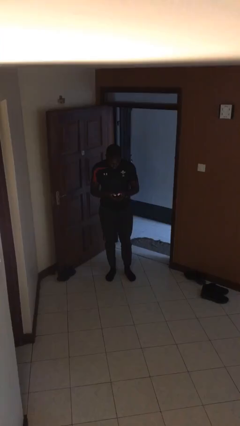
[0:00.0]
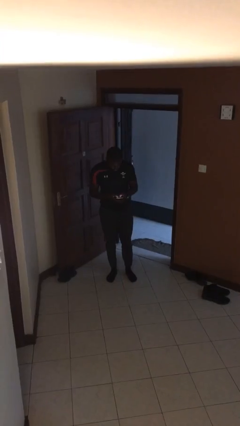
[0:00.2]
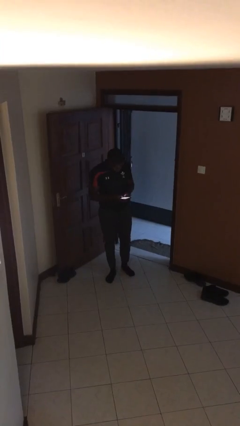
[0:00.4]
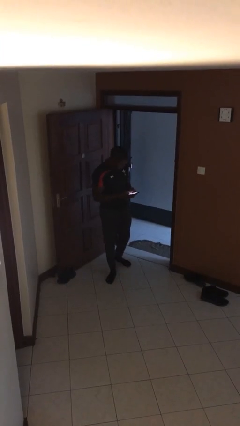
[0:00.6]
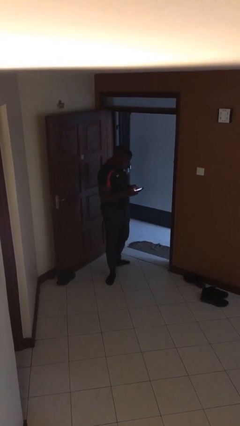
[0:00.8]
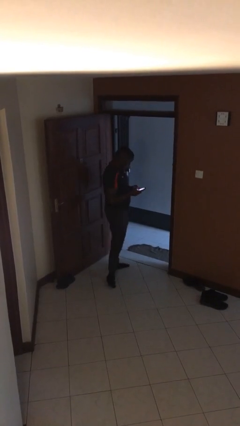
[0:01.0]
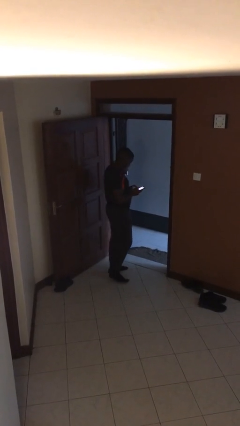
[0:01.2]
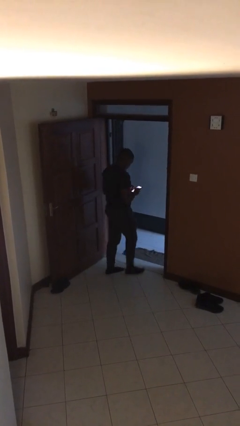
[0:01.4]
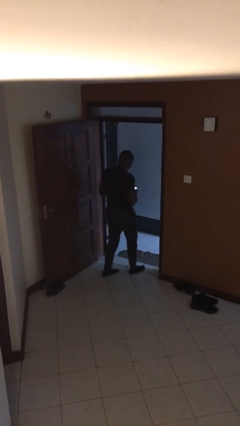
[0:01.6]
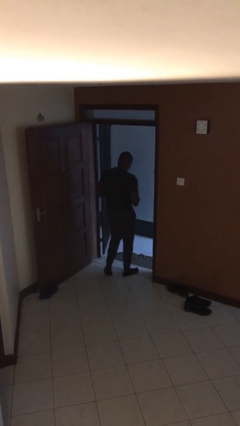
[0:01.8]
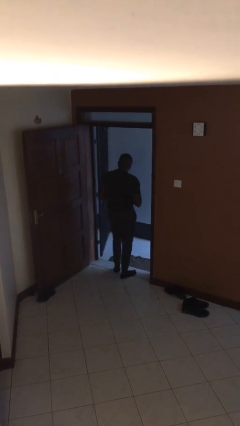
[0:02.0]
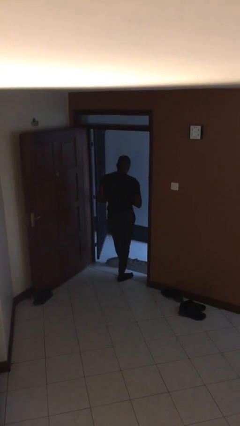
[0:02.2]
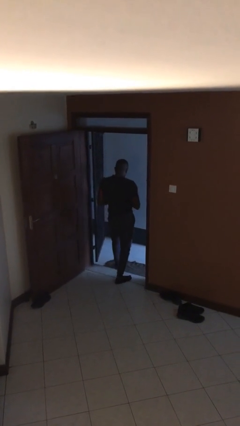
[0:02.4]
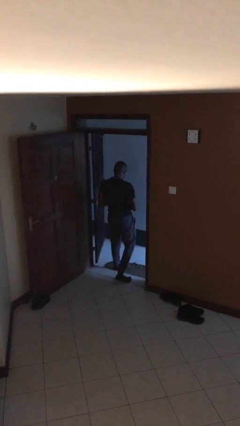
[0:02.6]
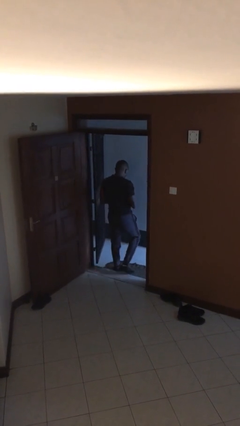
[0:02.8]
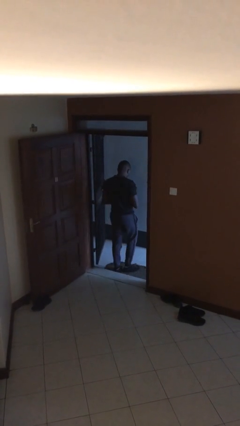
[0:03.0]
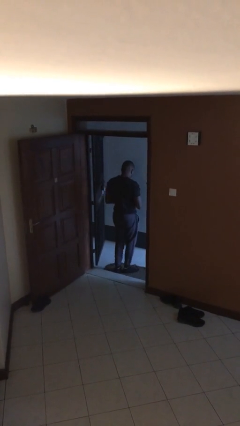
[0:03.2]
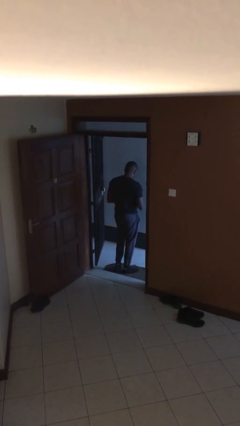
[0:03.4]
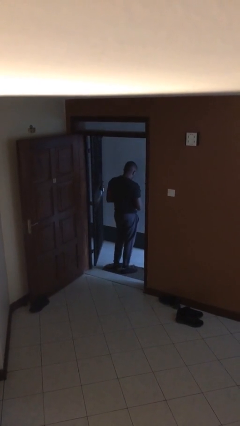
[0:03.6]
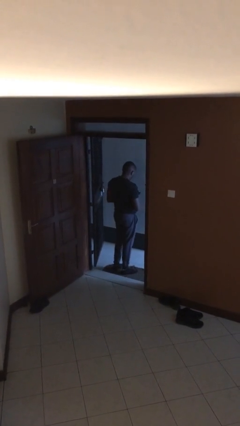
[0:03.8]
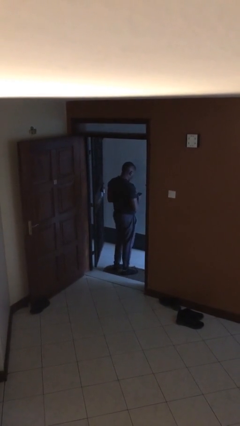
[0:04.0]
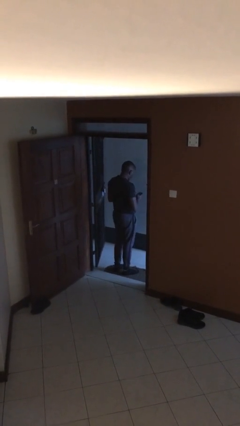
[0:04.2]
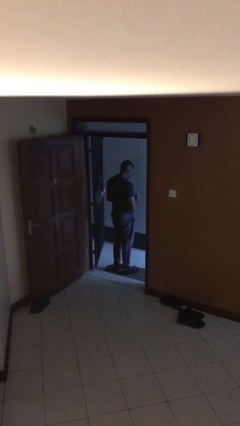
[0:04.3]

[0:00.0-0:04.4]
person exits scene through structure

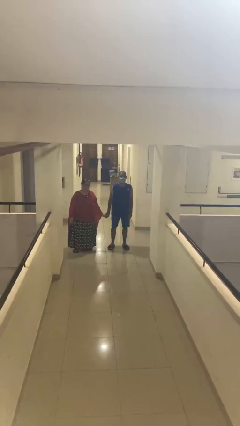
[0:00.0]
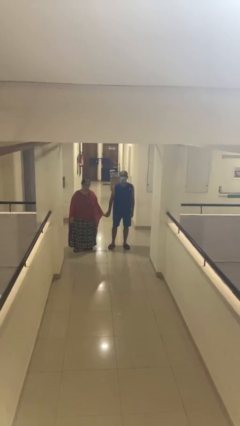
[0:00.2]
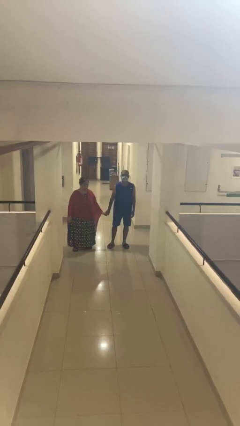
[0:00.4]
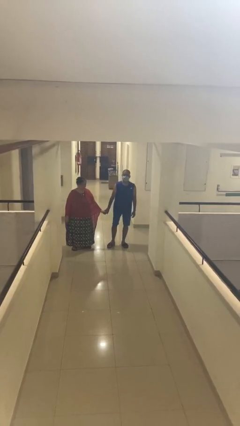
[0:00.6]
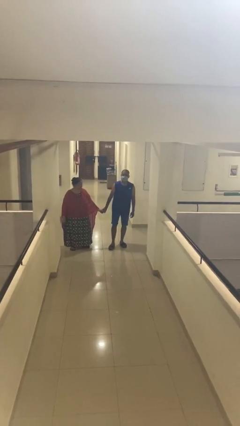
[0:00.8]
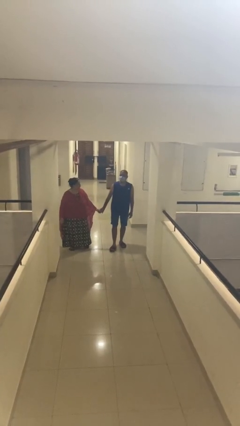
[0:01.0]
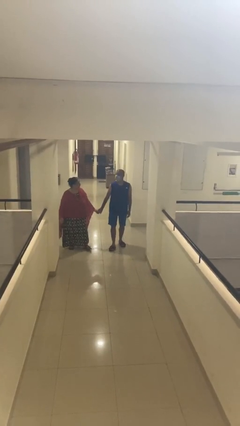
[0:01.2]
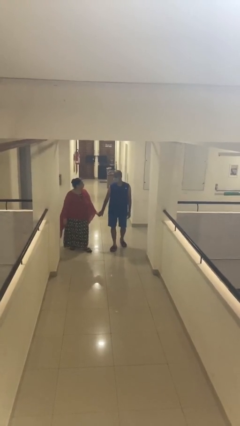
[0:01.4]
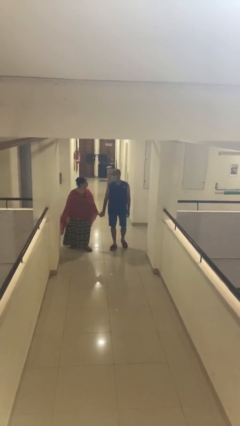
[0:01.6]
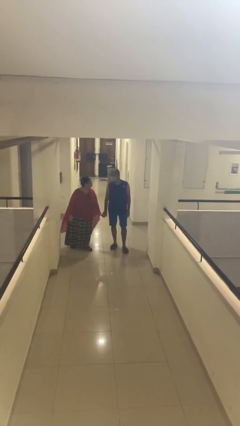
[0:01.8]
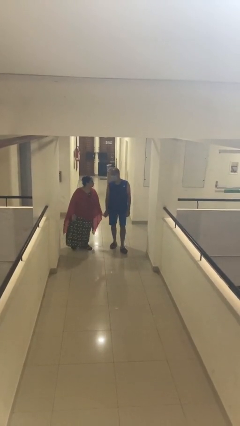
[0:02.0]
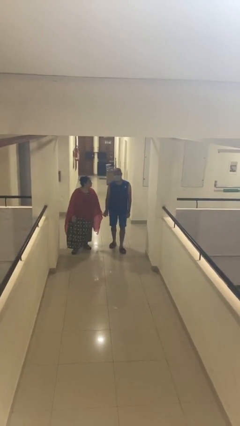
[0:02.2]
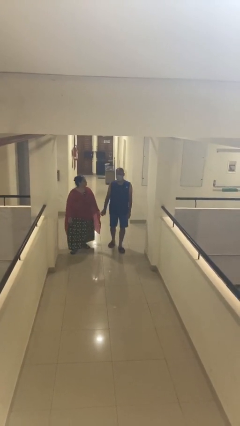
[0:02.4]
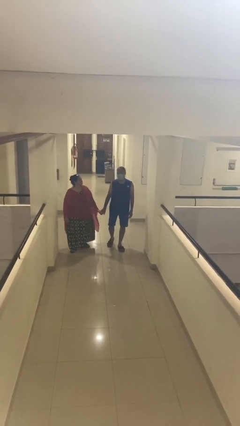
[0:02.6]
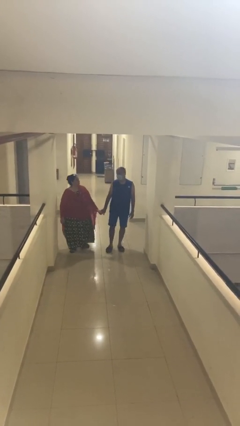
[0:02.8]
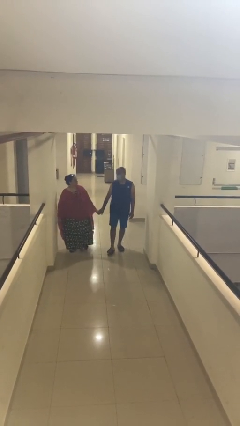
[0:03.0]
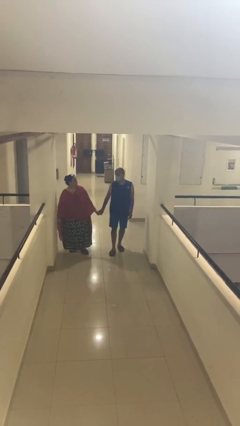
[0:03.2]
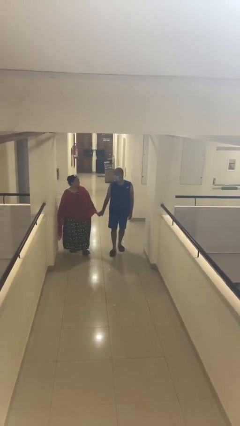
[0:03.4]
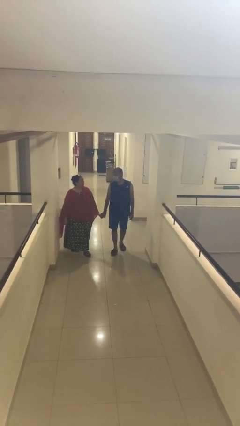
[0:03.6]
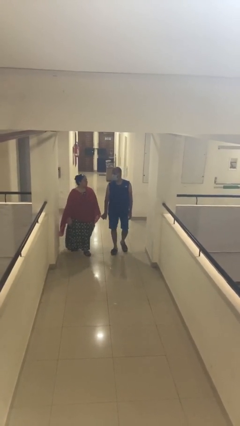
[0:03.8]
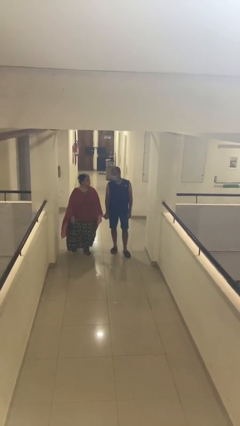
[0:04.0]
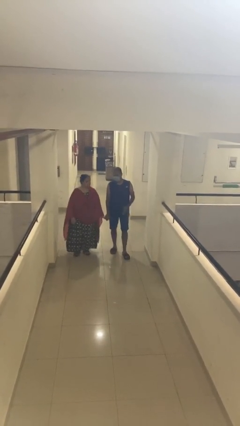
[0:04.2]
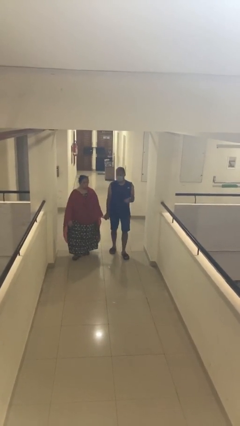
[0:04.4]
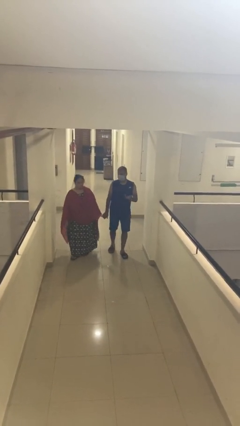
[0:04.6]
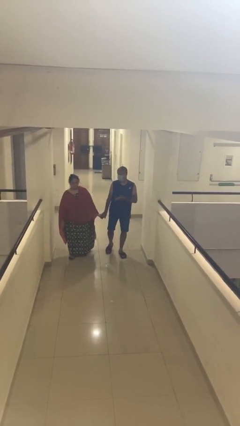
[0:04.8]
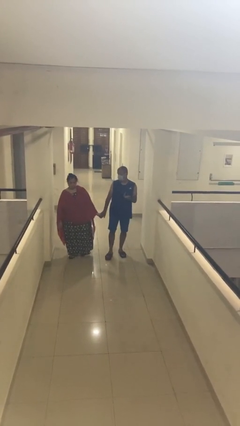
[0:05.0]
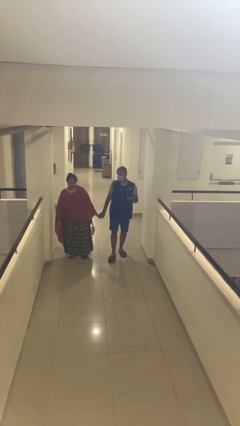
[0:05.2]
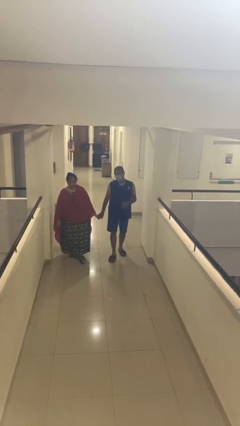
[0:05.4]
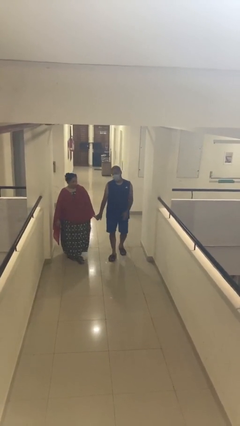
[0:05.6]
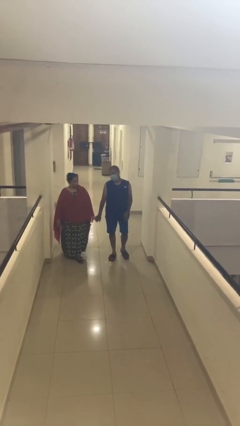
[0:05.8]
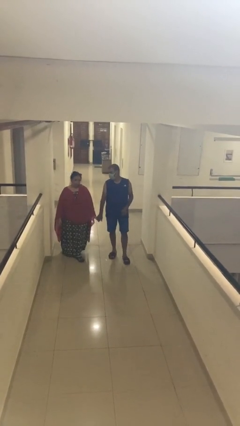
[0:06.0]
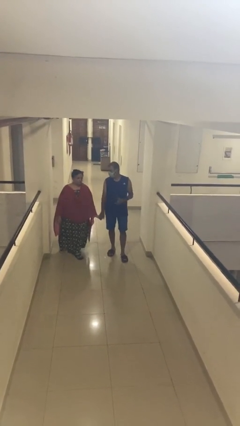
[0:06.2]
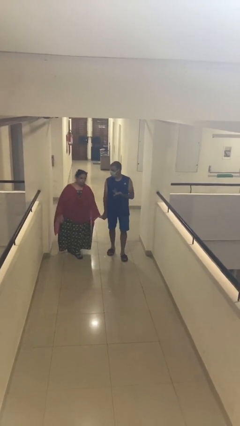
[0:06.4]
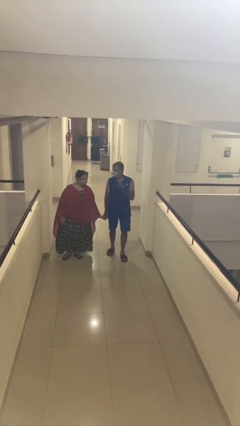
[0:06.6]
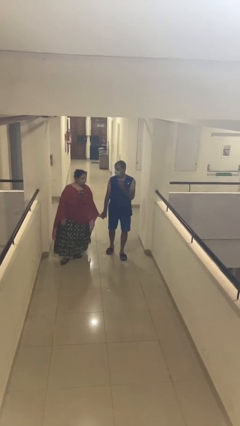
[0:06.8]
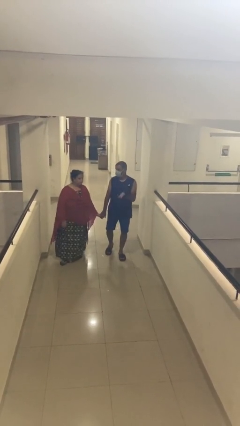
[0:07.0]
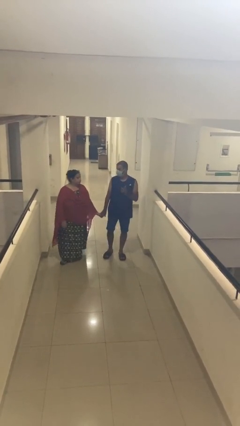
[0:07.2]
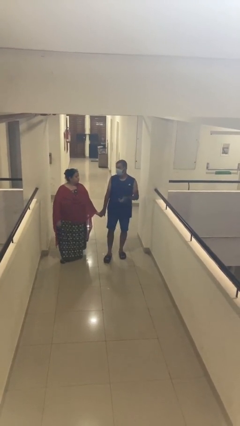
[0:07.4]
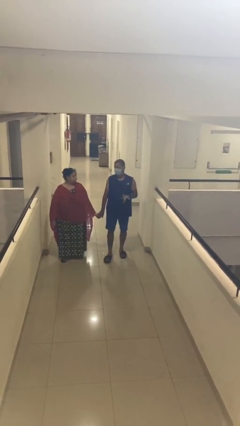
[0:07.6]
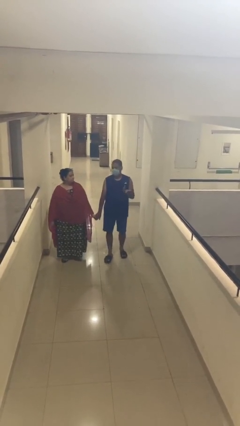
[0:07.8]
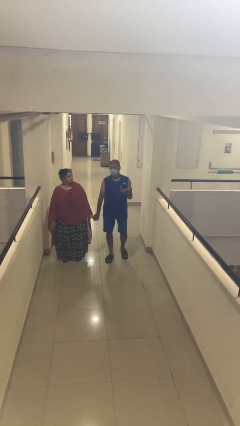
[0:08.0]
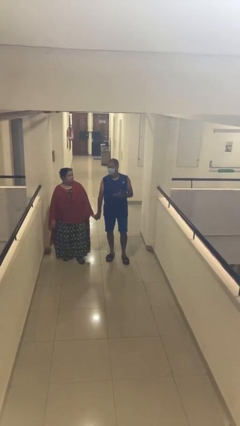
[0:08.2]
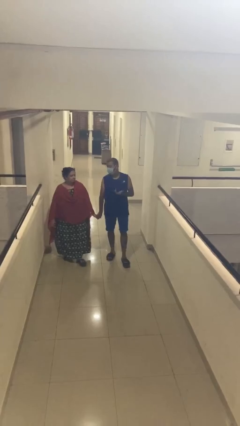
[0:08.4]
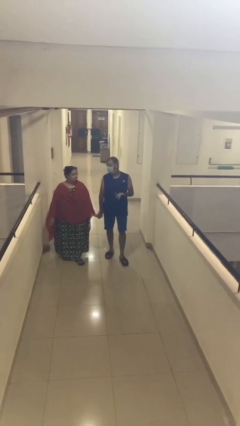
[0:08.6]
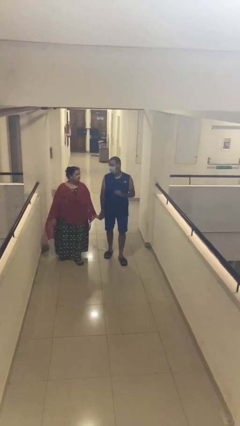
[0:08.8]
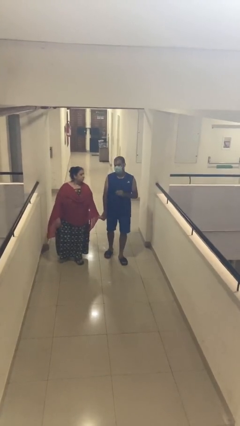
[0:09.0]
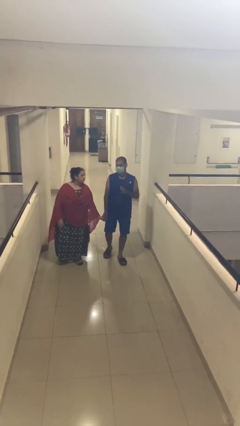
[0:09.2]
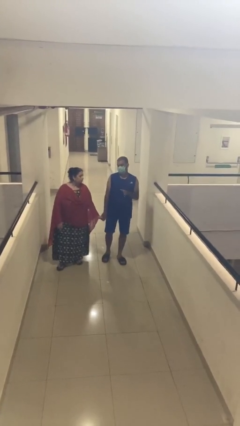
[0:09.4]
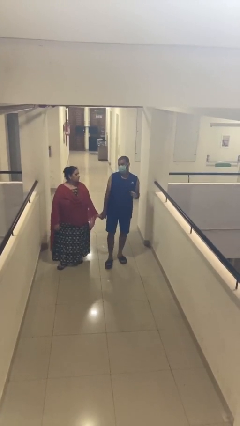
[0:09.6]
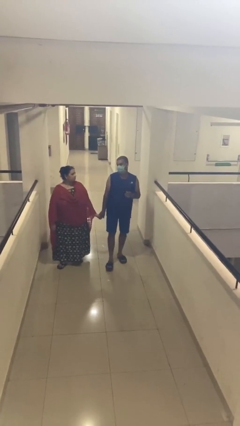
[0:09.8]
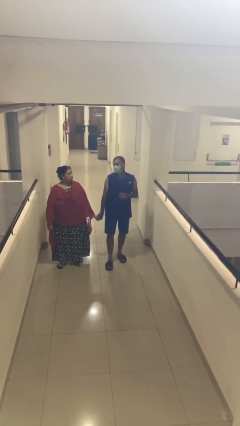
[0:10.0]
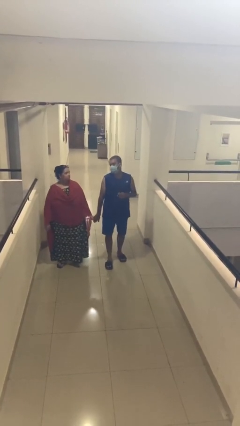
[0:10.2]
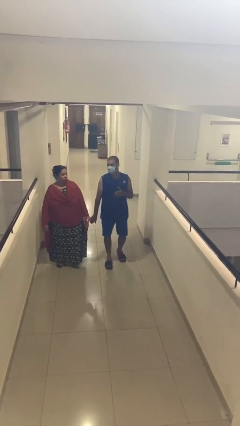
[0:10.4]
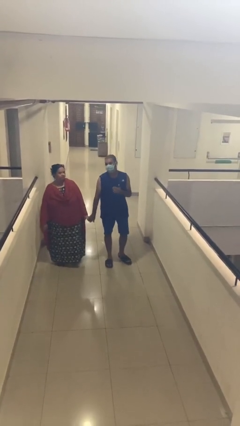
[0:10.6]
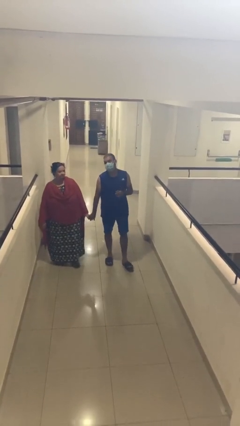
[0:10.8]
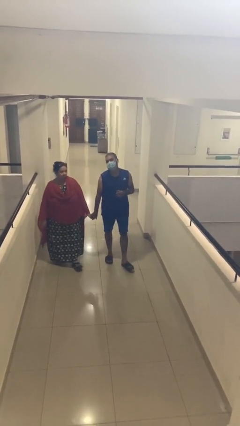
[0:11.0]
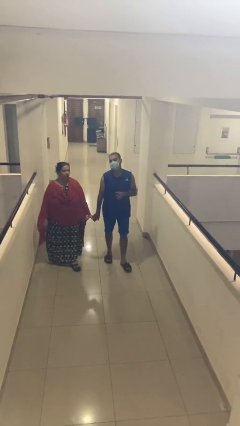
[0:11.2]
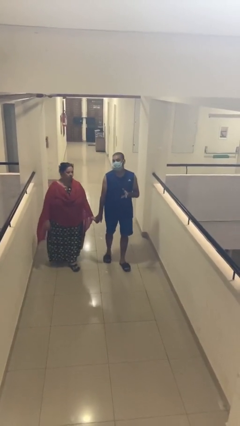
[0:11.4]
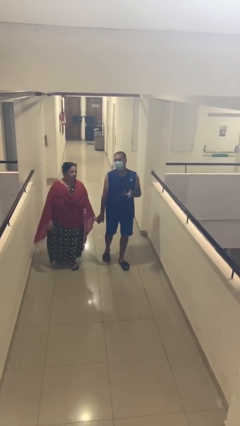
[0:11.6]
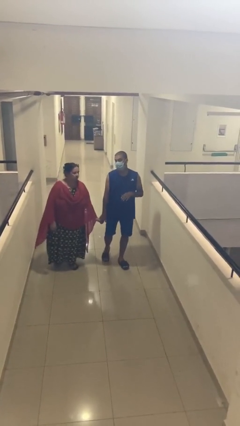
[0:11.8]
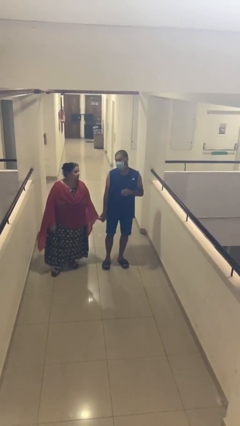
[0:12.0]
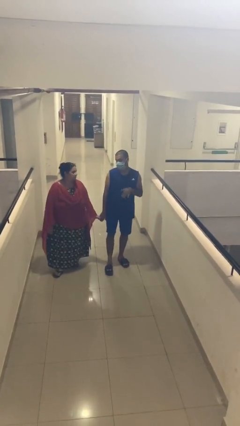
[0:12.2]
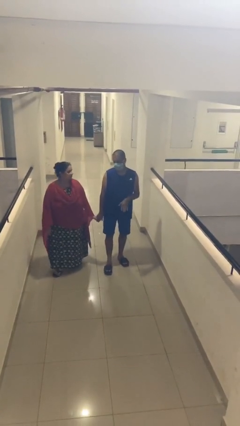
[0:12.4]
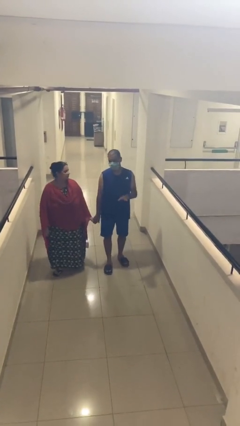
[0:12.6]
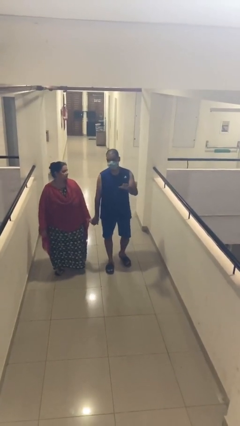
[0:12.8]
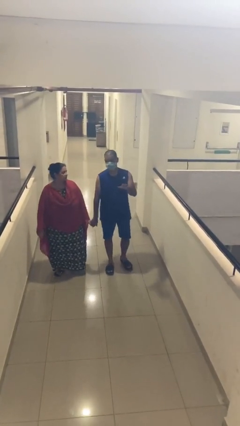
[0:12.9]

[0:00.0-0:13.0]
person holds hand

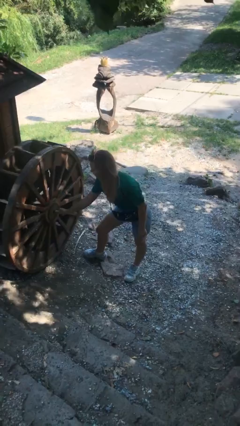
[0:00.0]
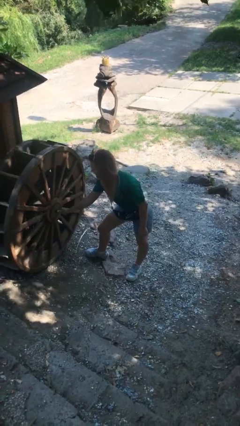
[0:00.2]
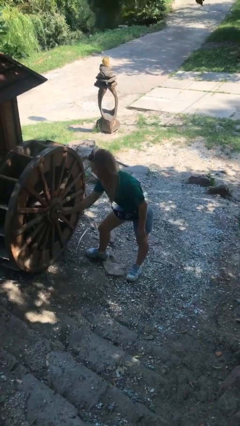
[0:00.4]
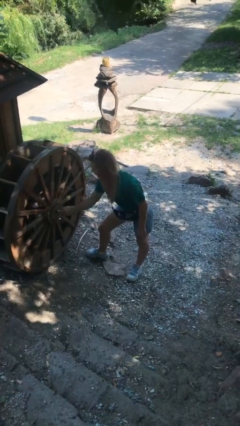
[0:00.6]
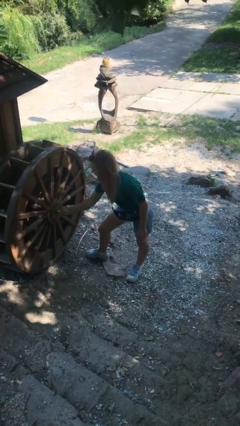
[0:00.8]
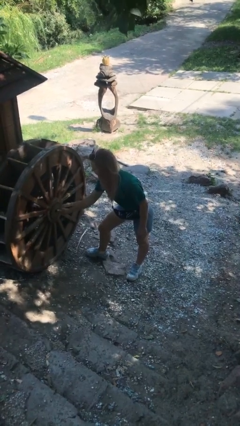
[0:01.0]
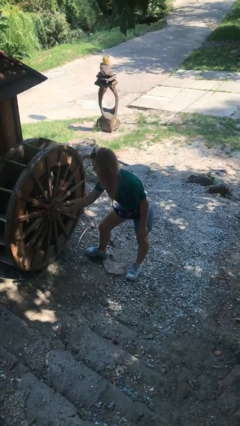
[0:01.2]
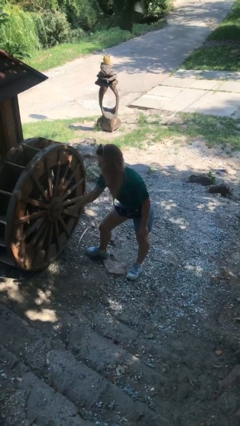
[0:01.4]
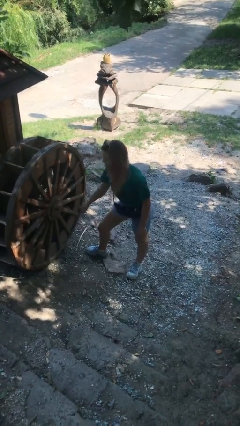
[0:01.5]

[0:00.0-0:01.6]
person taps object with finger
